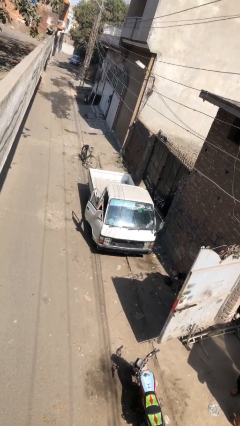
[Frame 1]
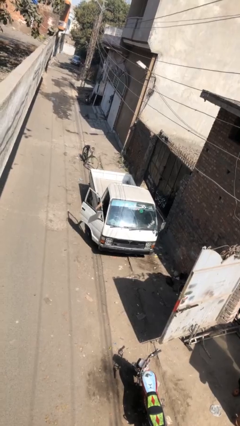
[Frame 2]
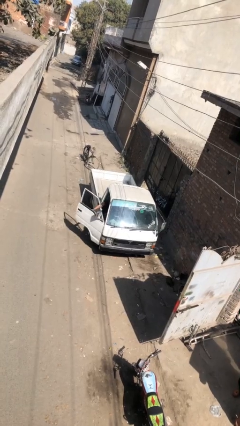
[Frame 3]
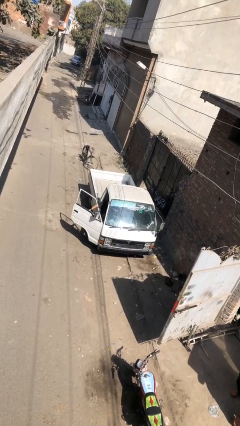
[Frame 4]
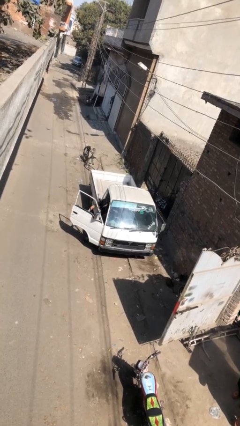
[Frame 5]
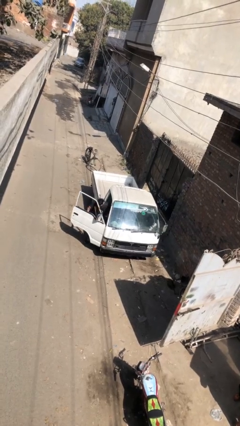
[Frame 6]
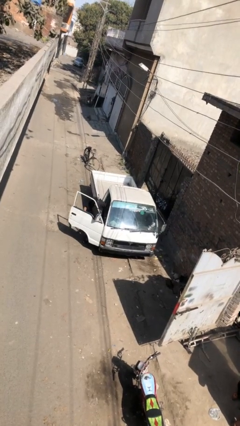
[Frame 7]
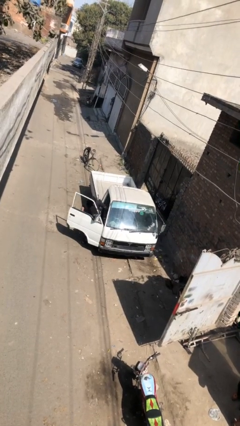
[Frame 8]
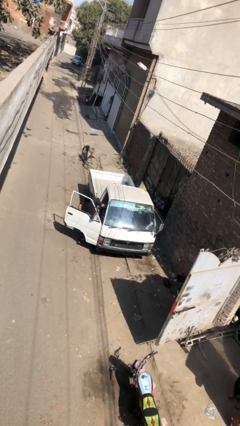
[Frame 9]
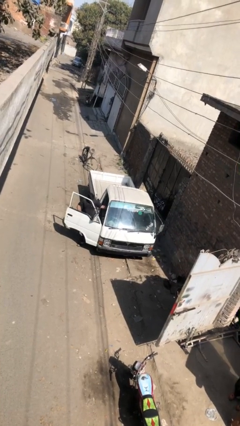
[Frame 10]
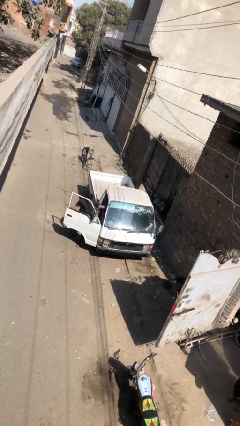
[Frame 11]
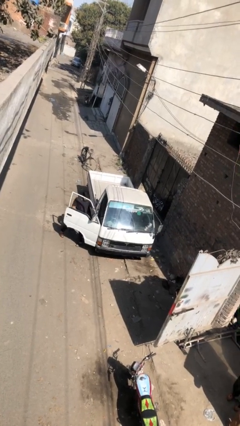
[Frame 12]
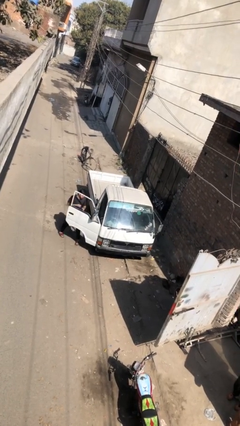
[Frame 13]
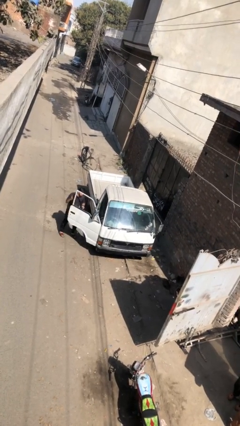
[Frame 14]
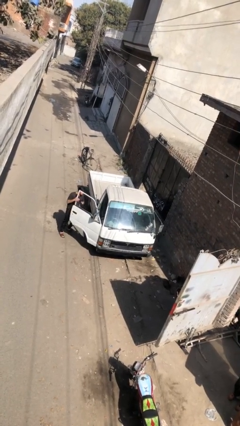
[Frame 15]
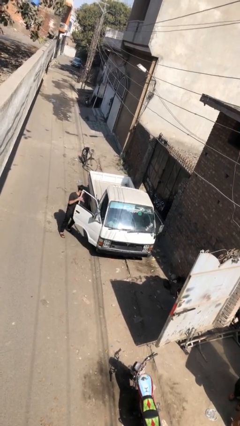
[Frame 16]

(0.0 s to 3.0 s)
car drops off person

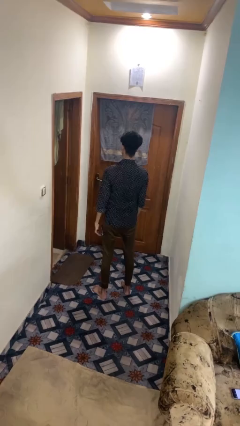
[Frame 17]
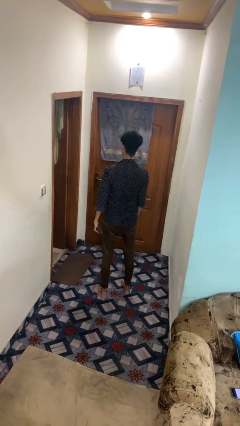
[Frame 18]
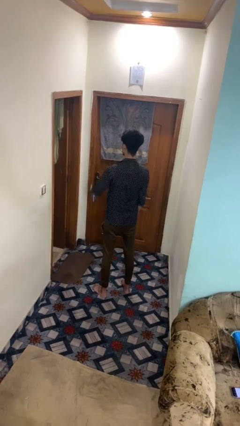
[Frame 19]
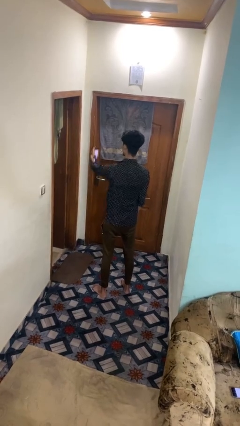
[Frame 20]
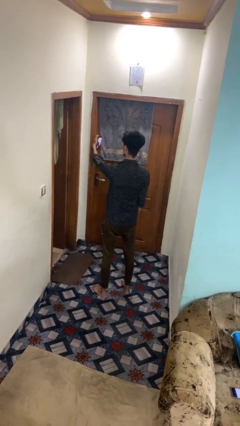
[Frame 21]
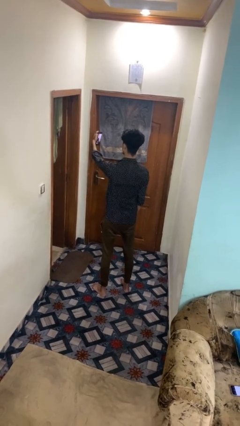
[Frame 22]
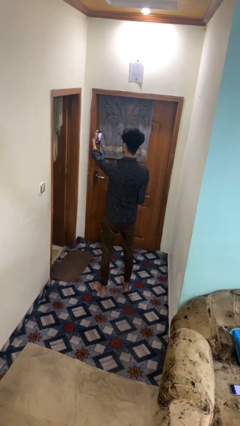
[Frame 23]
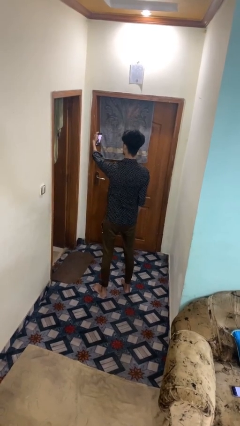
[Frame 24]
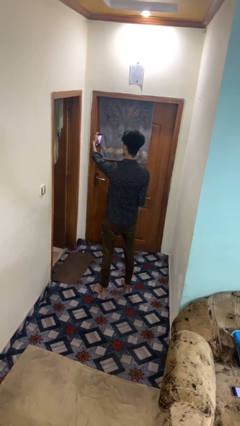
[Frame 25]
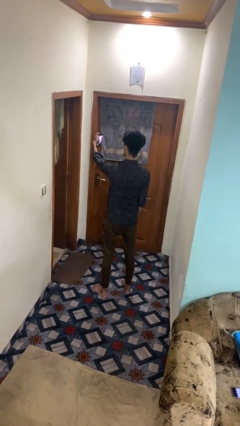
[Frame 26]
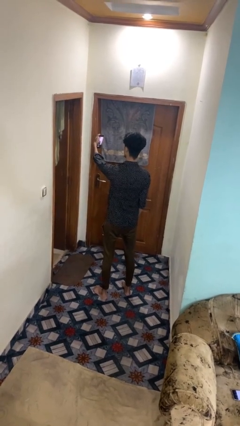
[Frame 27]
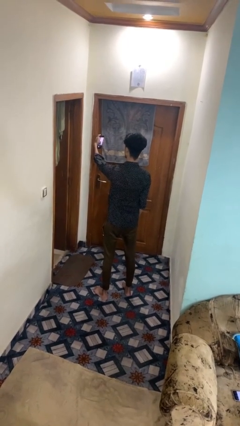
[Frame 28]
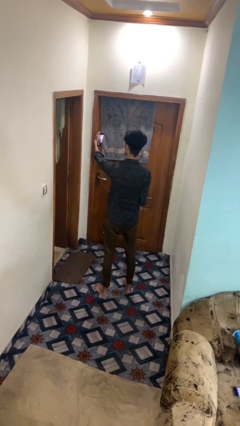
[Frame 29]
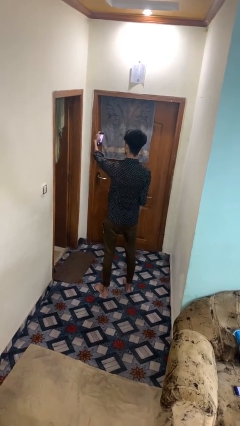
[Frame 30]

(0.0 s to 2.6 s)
person takes selfie

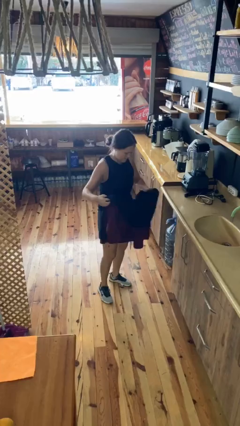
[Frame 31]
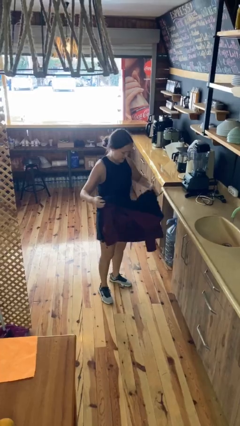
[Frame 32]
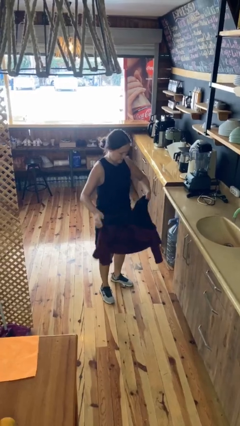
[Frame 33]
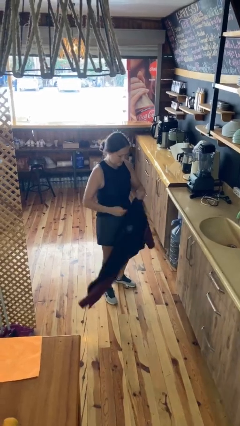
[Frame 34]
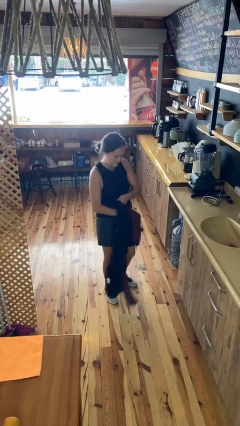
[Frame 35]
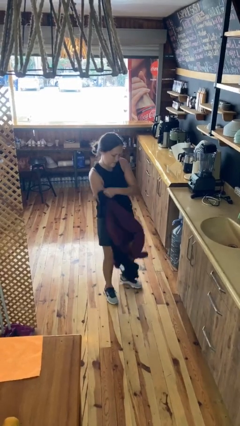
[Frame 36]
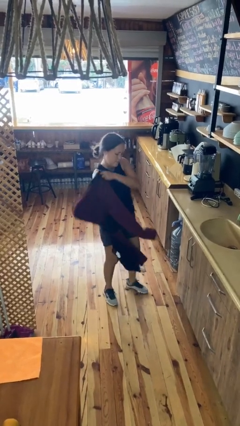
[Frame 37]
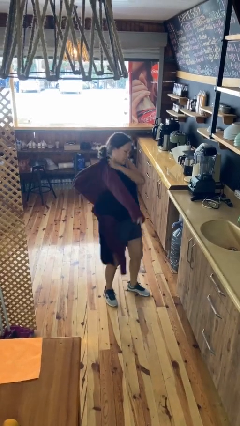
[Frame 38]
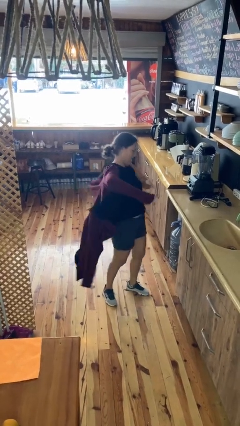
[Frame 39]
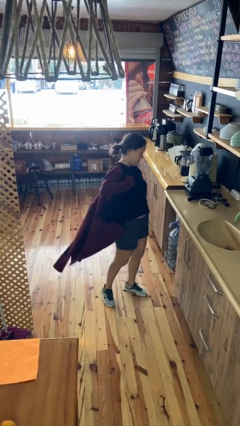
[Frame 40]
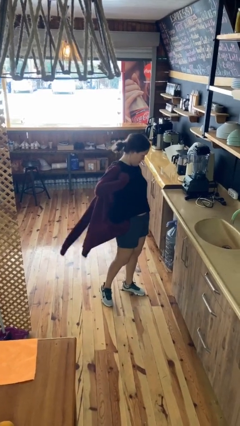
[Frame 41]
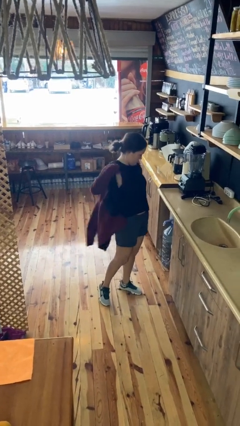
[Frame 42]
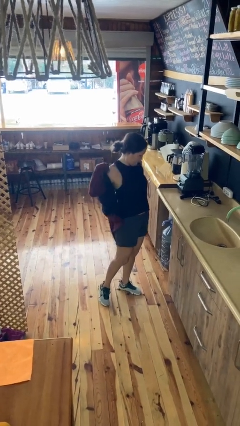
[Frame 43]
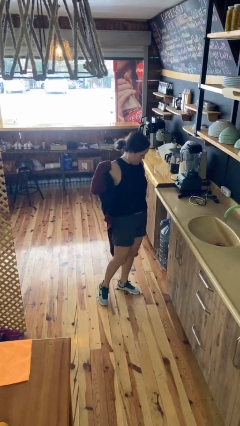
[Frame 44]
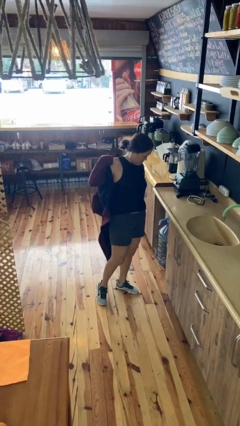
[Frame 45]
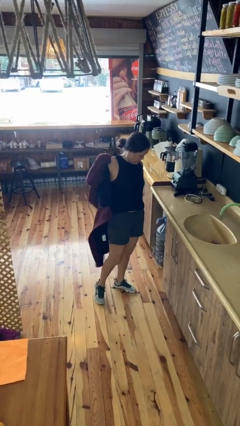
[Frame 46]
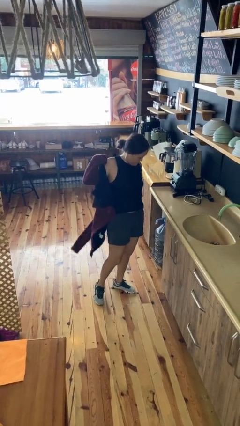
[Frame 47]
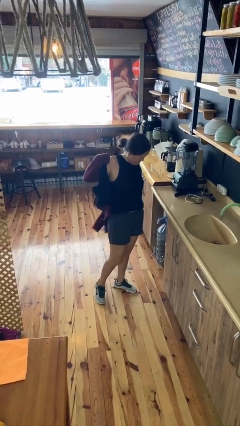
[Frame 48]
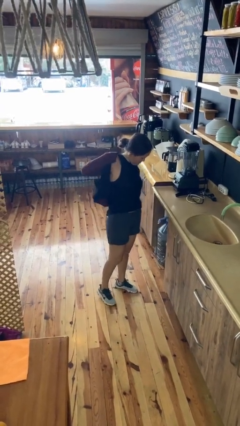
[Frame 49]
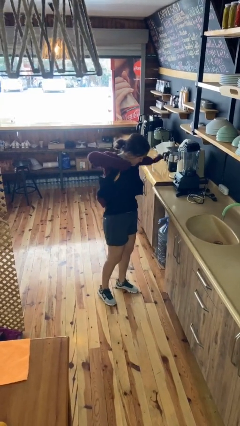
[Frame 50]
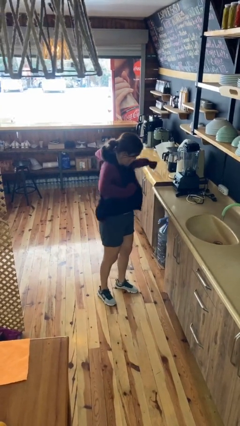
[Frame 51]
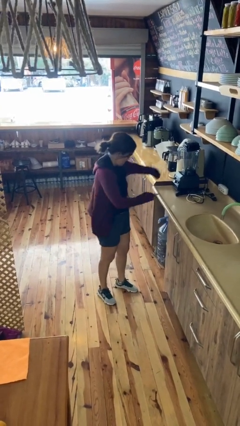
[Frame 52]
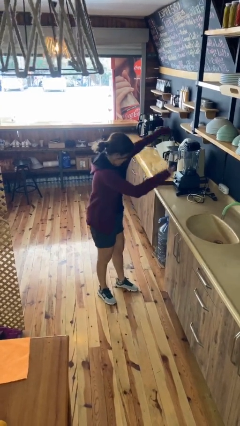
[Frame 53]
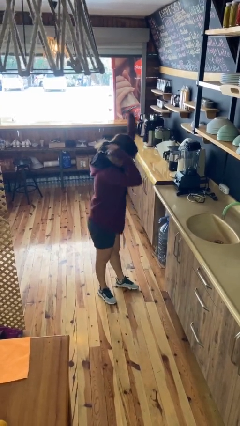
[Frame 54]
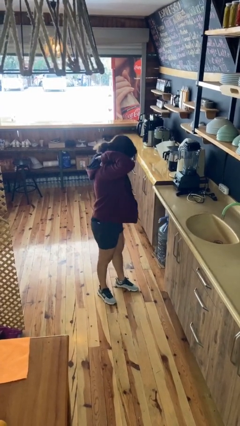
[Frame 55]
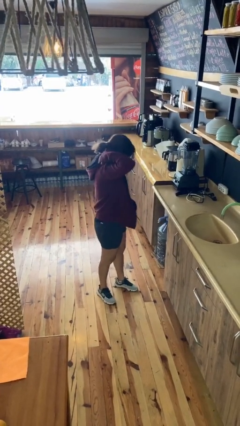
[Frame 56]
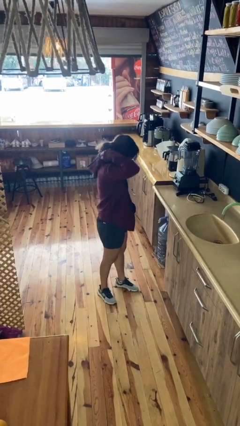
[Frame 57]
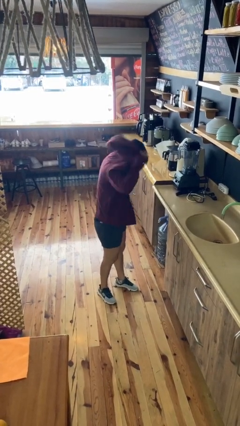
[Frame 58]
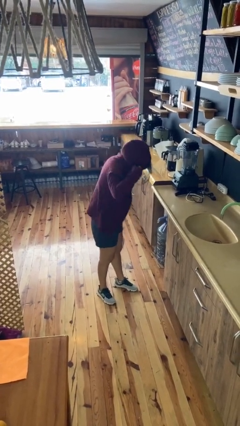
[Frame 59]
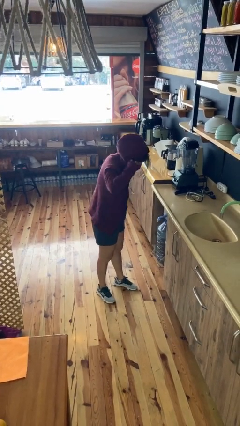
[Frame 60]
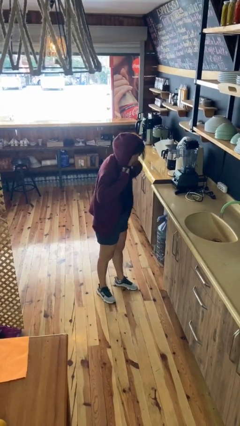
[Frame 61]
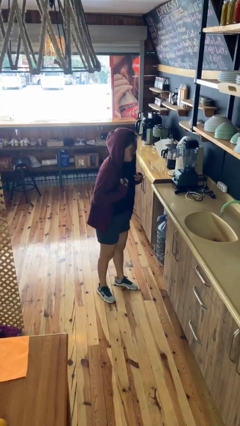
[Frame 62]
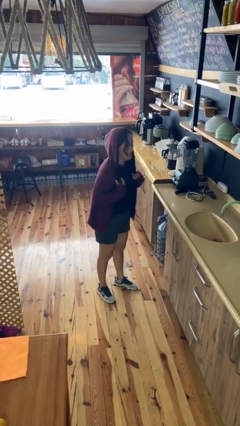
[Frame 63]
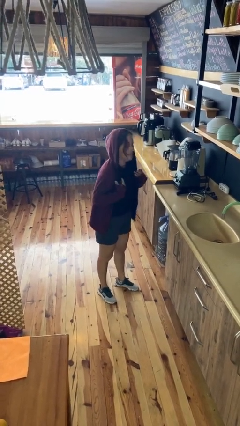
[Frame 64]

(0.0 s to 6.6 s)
person puts on hoodie

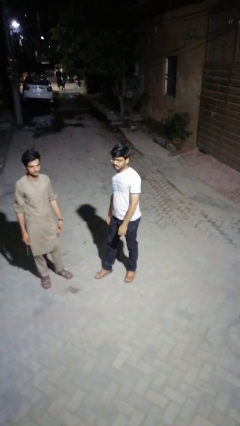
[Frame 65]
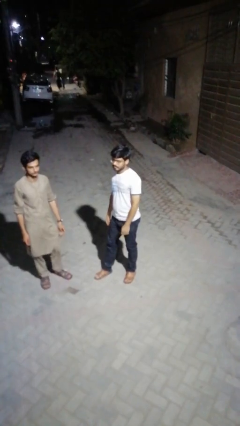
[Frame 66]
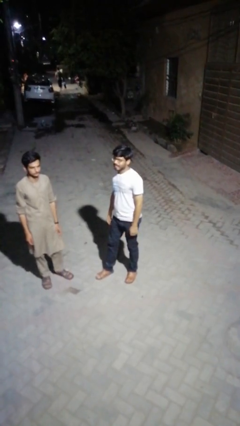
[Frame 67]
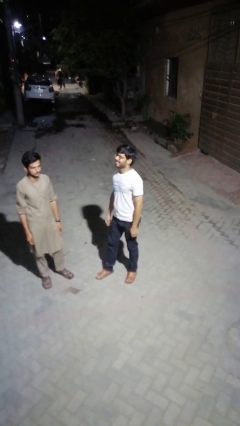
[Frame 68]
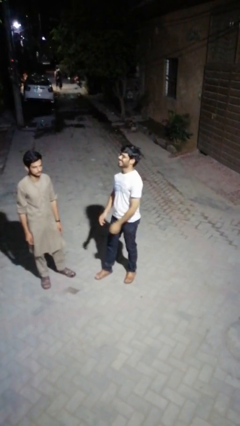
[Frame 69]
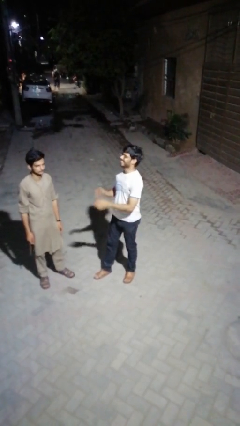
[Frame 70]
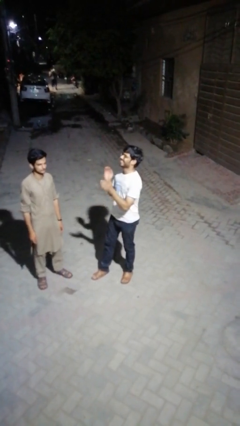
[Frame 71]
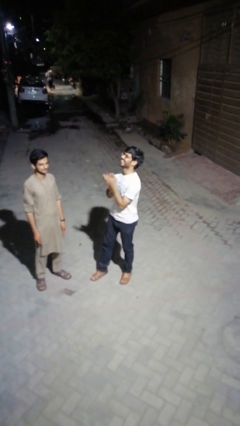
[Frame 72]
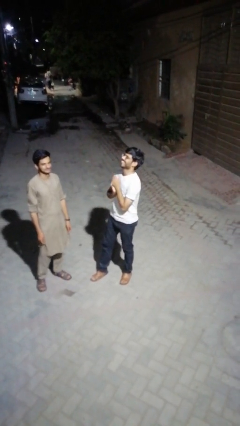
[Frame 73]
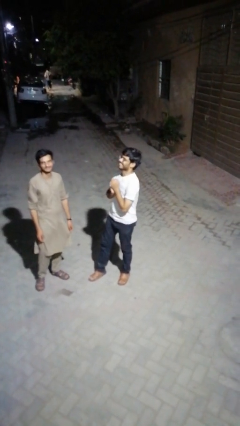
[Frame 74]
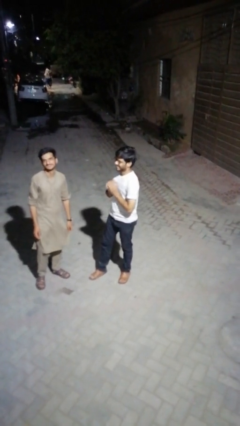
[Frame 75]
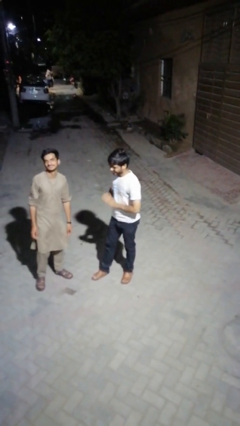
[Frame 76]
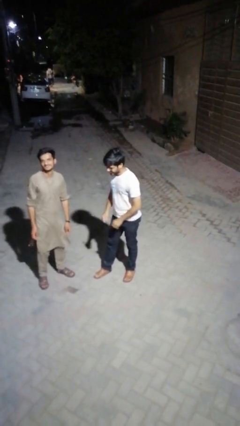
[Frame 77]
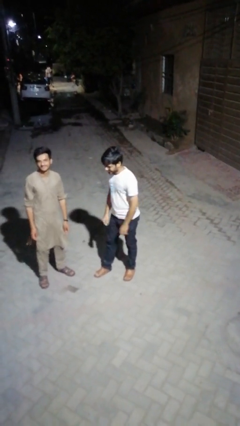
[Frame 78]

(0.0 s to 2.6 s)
person laughs with person

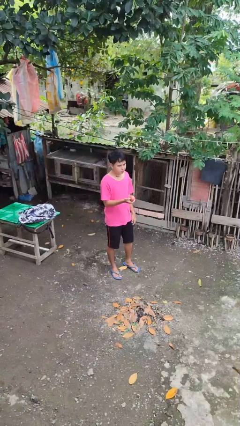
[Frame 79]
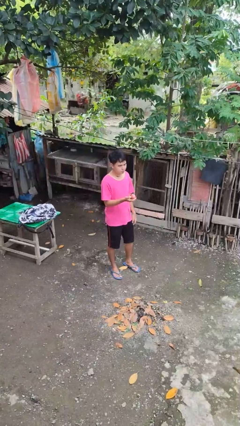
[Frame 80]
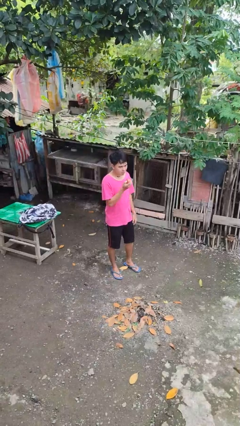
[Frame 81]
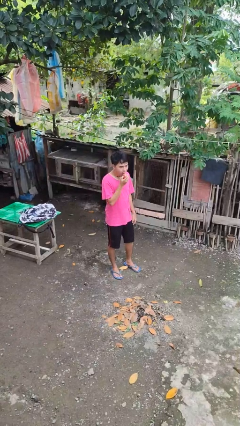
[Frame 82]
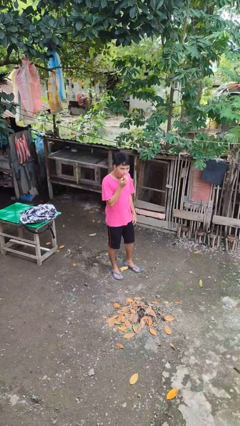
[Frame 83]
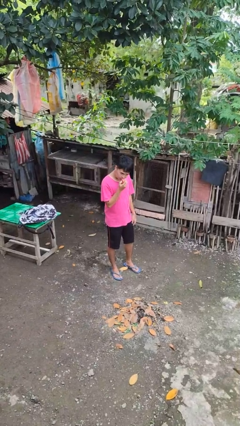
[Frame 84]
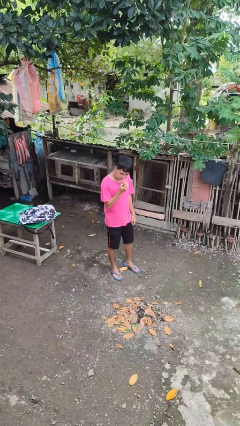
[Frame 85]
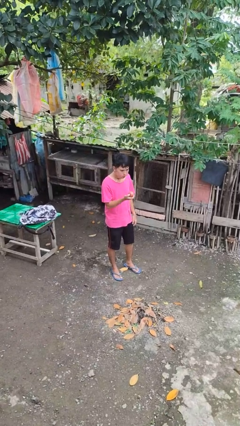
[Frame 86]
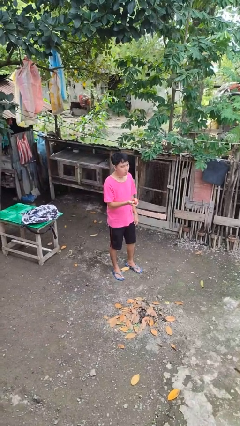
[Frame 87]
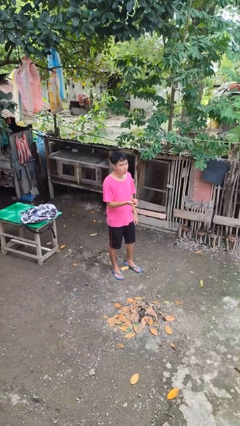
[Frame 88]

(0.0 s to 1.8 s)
person eats apple

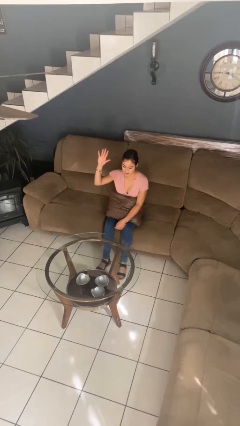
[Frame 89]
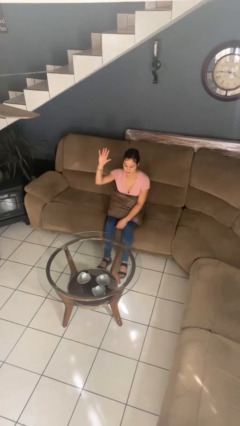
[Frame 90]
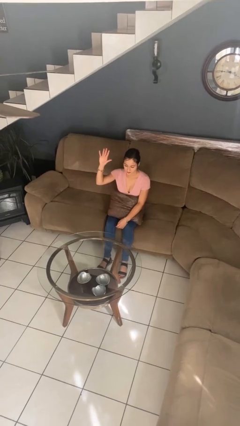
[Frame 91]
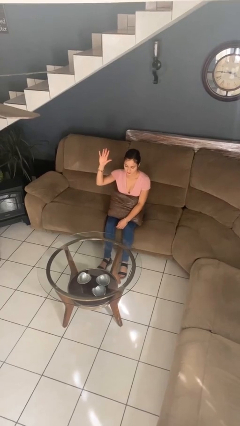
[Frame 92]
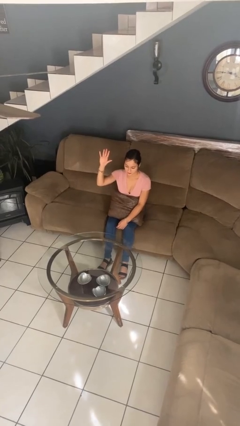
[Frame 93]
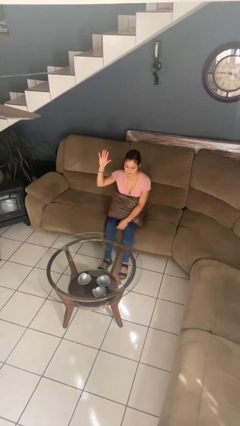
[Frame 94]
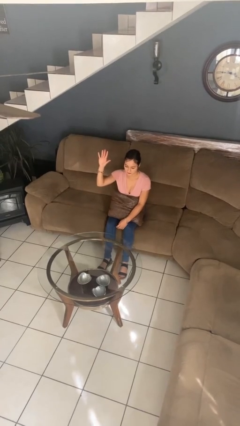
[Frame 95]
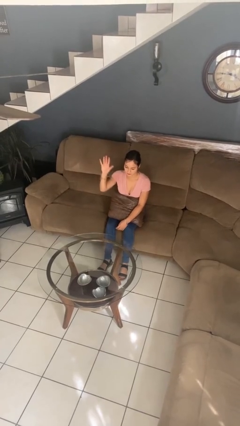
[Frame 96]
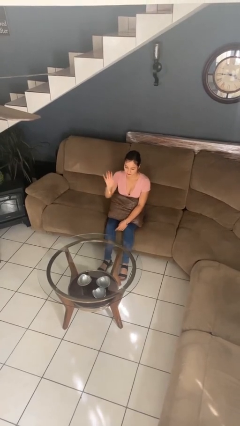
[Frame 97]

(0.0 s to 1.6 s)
person gestures number five
